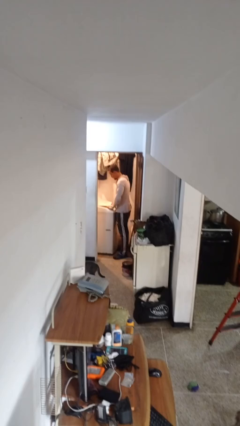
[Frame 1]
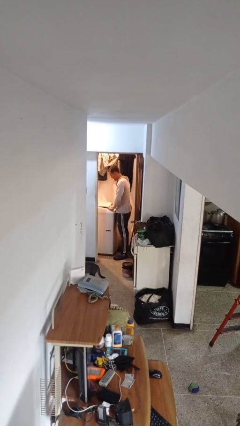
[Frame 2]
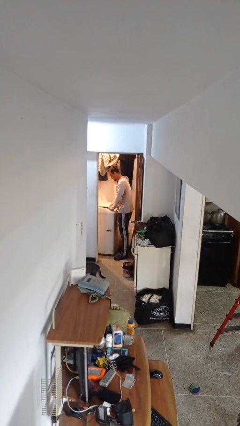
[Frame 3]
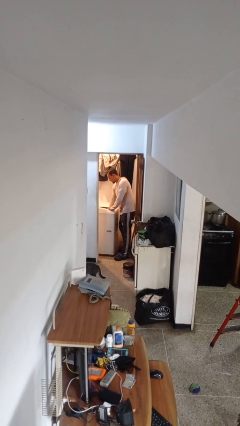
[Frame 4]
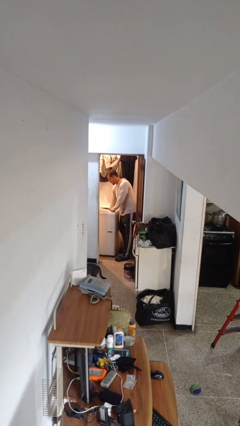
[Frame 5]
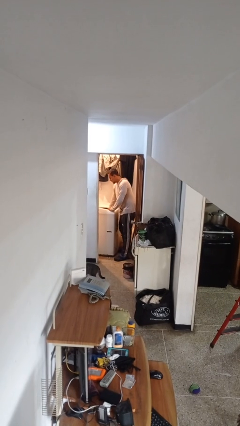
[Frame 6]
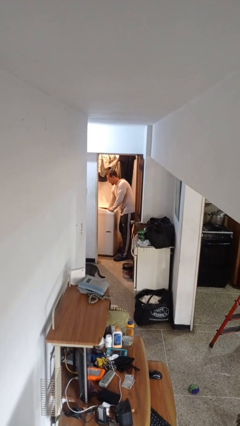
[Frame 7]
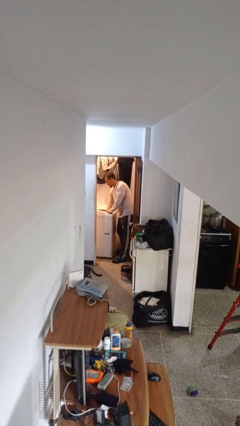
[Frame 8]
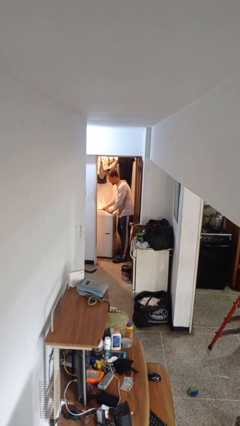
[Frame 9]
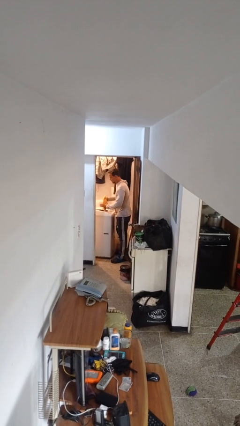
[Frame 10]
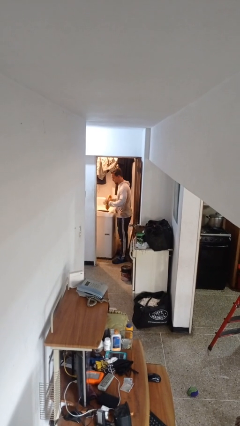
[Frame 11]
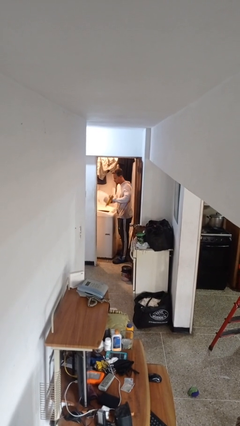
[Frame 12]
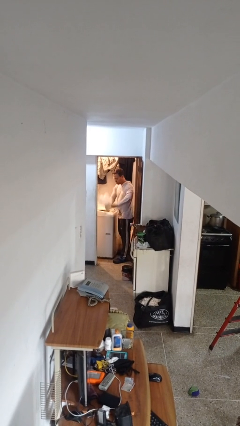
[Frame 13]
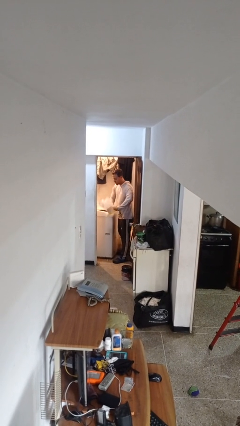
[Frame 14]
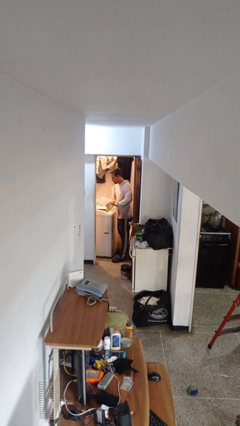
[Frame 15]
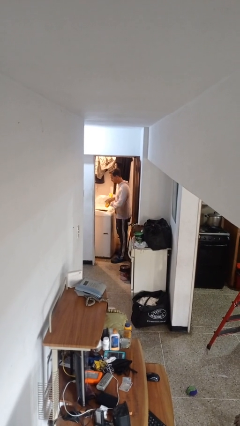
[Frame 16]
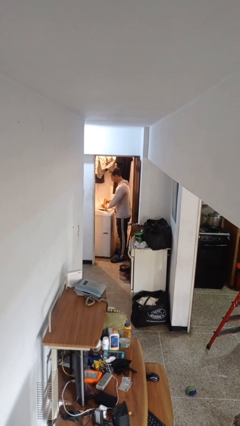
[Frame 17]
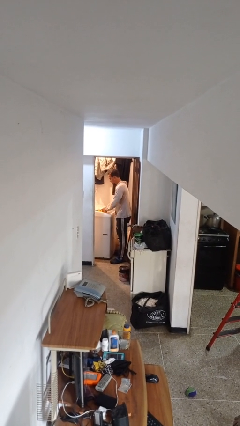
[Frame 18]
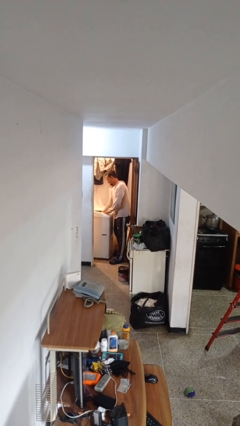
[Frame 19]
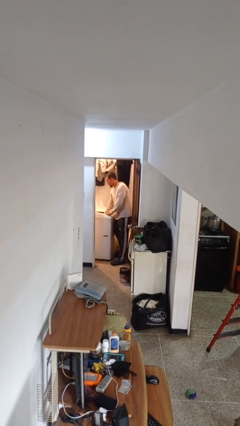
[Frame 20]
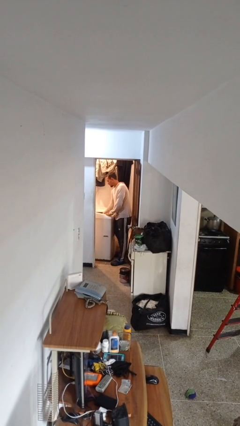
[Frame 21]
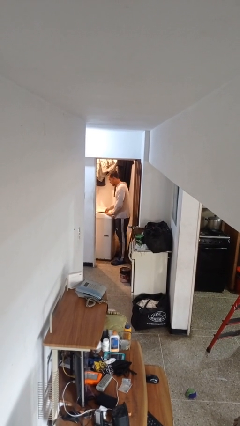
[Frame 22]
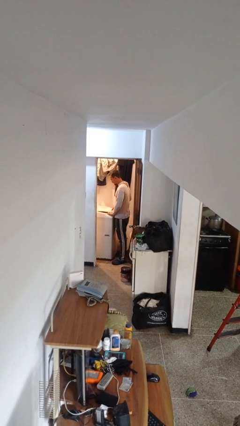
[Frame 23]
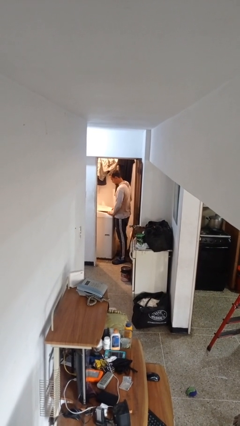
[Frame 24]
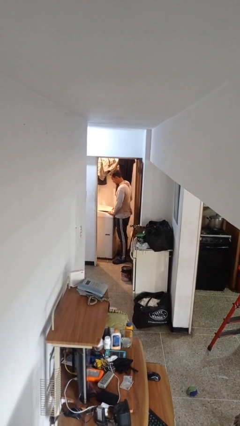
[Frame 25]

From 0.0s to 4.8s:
person cleans dryer lint trap

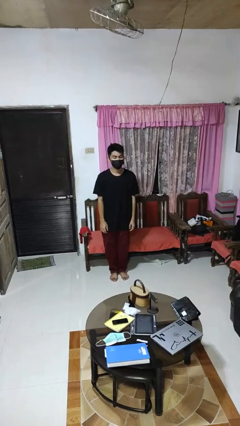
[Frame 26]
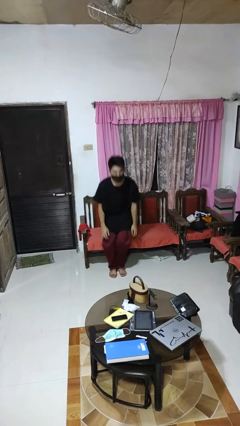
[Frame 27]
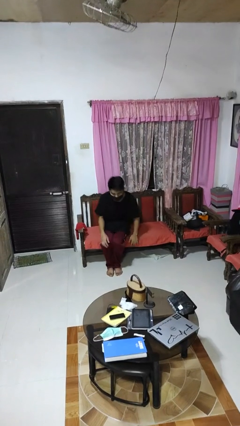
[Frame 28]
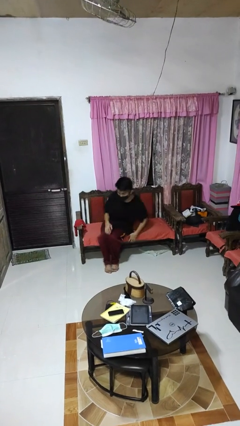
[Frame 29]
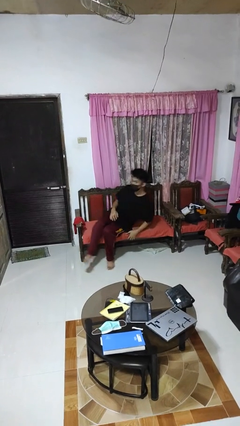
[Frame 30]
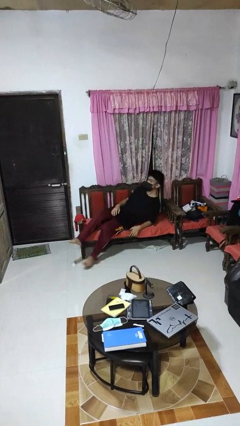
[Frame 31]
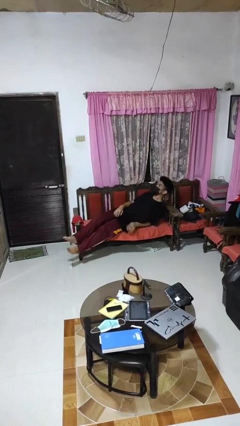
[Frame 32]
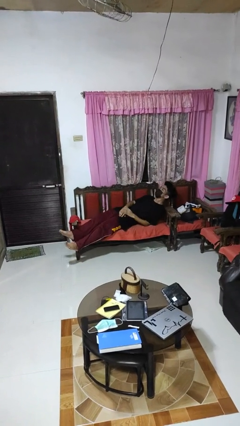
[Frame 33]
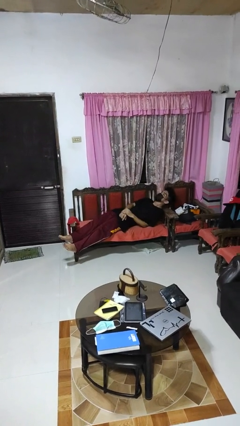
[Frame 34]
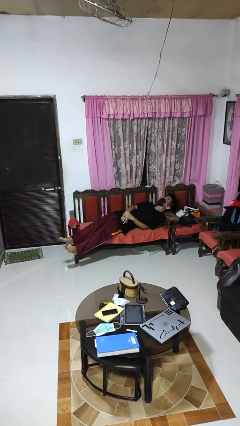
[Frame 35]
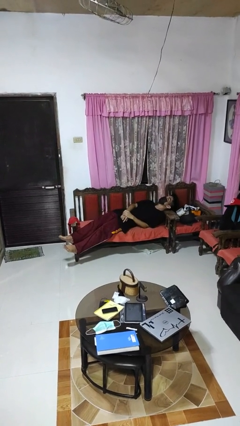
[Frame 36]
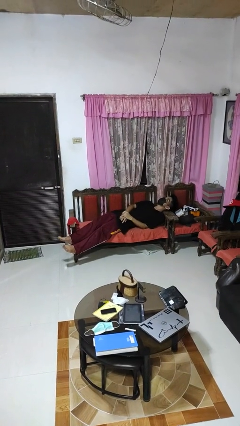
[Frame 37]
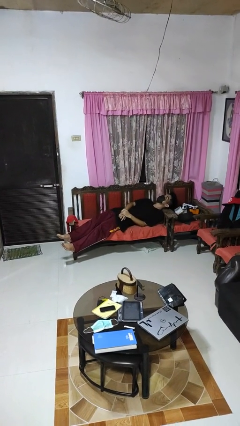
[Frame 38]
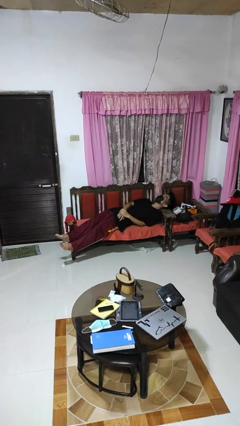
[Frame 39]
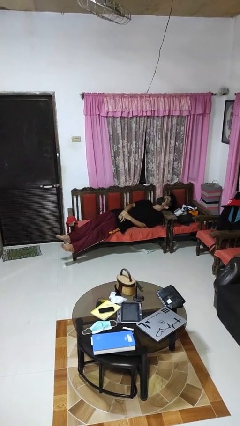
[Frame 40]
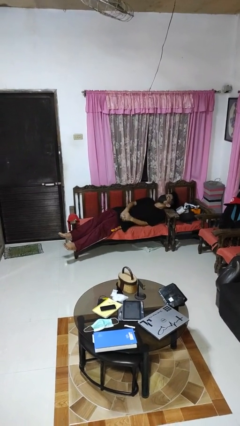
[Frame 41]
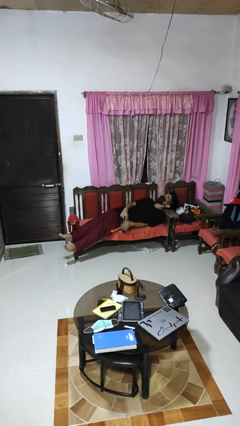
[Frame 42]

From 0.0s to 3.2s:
person lies down on couch

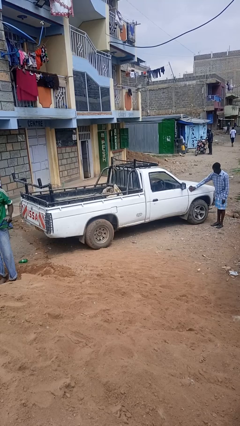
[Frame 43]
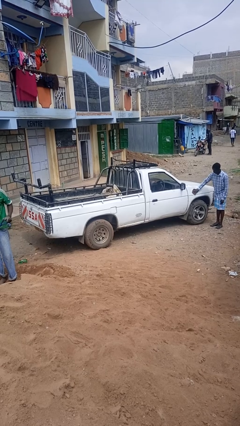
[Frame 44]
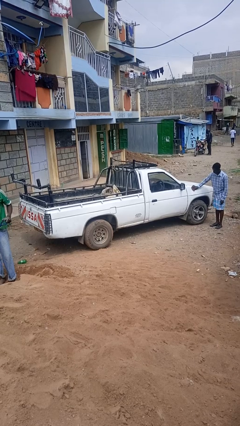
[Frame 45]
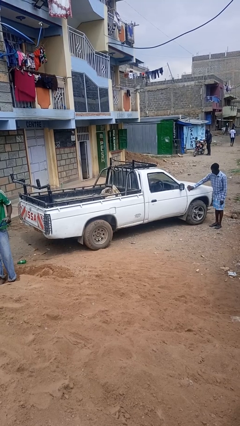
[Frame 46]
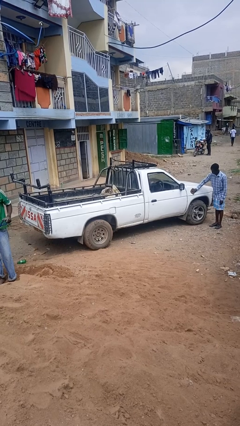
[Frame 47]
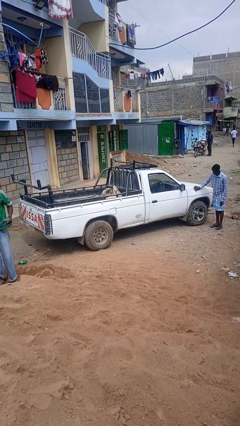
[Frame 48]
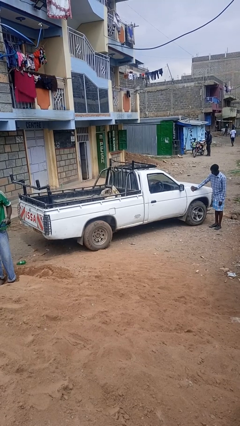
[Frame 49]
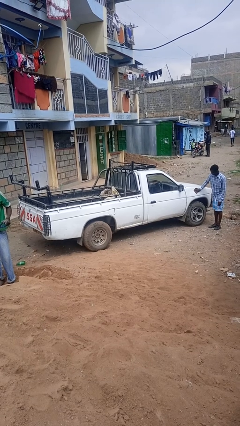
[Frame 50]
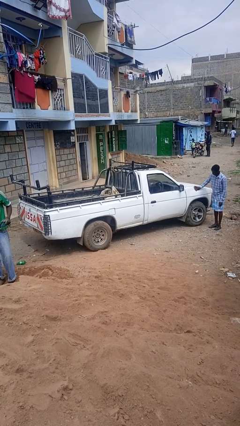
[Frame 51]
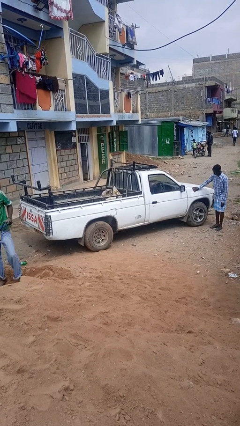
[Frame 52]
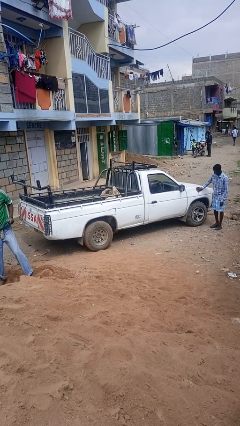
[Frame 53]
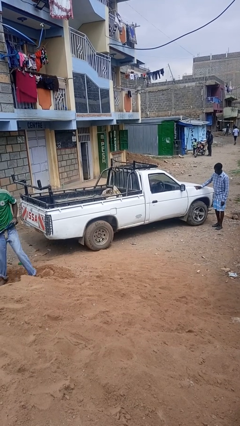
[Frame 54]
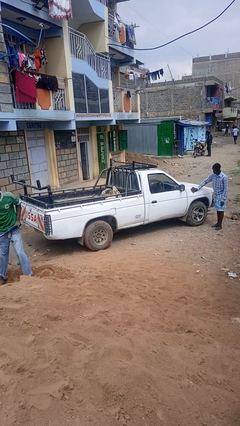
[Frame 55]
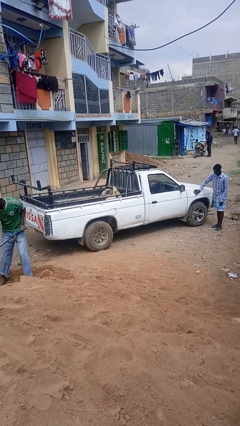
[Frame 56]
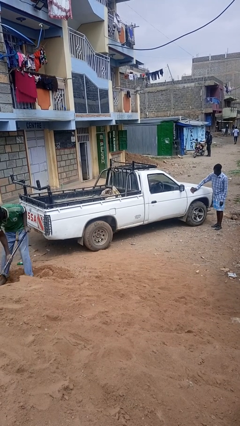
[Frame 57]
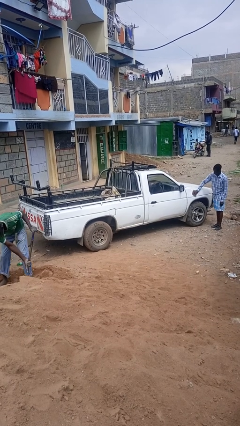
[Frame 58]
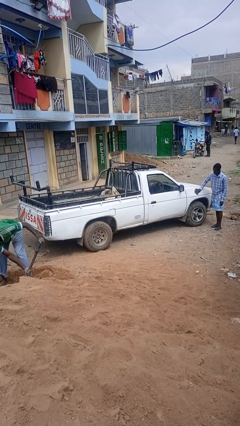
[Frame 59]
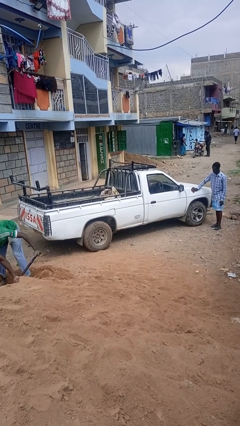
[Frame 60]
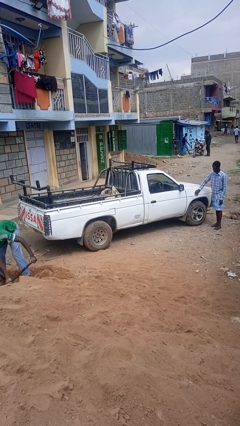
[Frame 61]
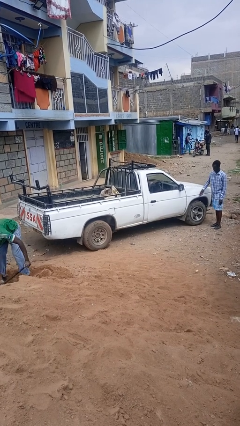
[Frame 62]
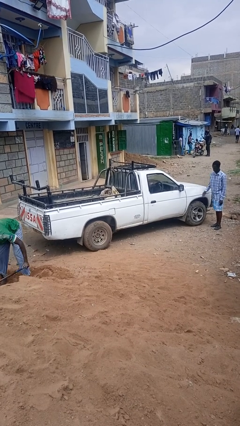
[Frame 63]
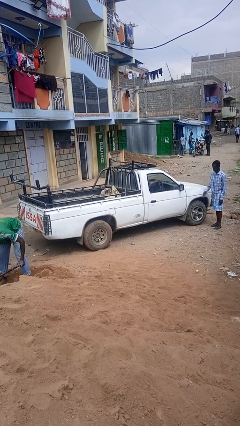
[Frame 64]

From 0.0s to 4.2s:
person polishes car with rag

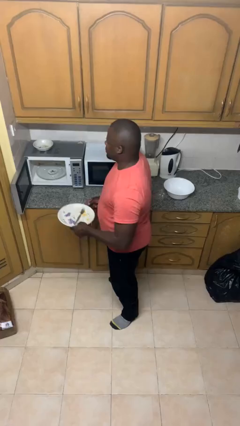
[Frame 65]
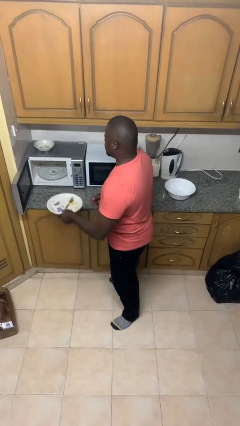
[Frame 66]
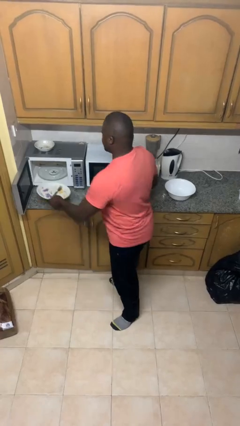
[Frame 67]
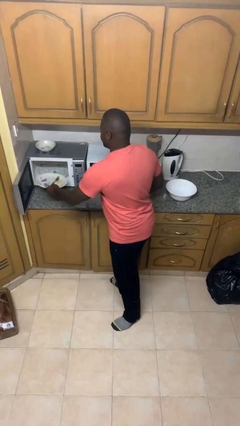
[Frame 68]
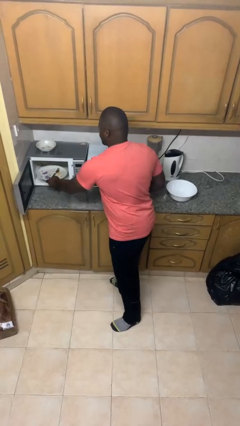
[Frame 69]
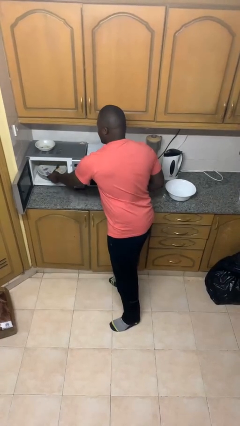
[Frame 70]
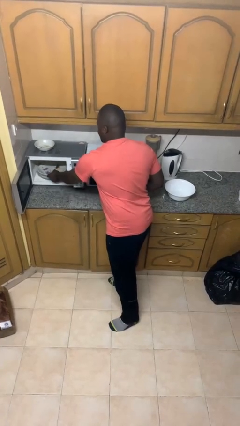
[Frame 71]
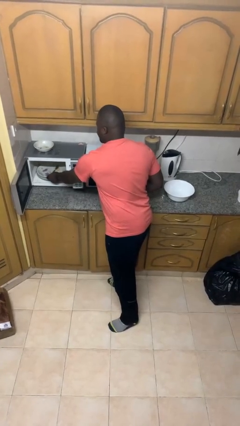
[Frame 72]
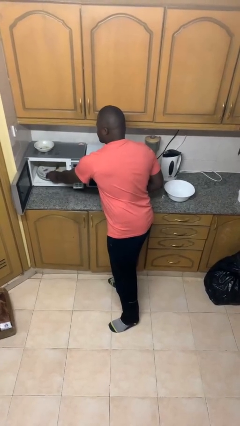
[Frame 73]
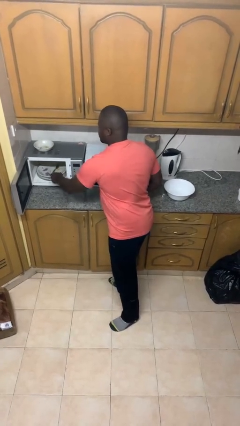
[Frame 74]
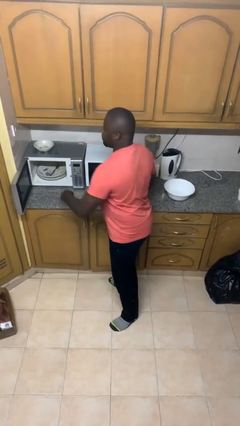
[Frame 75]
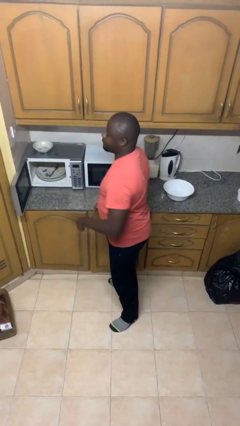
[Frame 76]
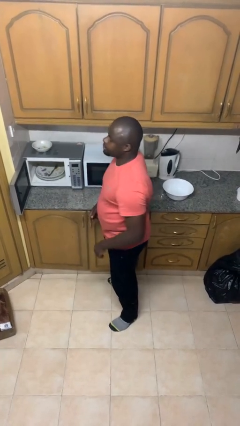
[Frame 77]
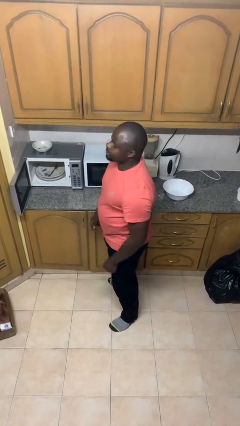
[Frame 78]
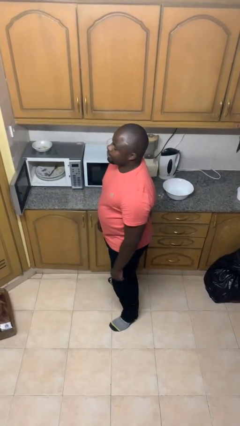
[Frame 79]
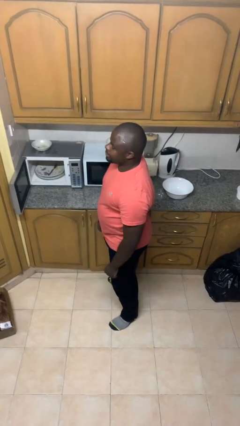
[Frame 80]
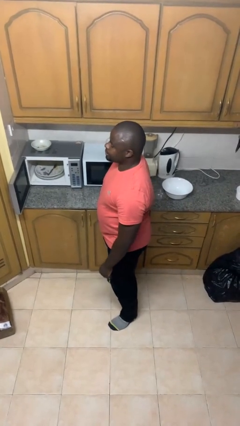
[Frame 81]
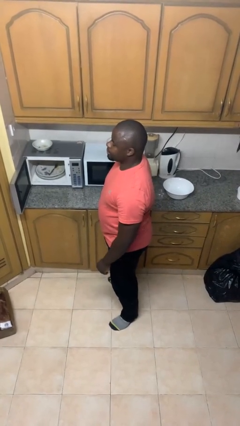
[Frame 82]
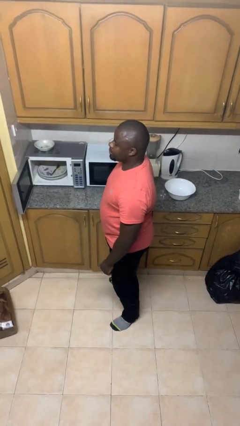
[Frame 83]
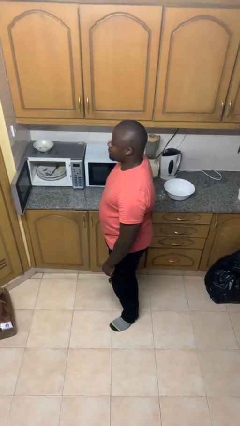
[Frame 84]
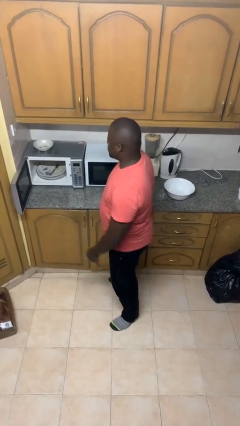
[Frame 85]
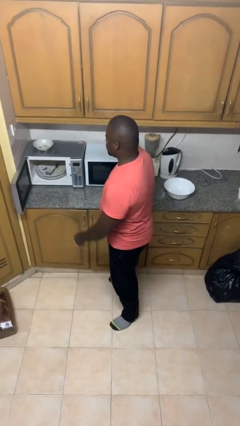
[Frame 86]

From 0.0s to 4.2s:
person puts object into microwave

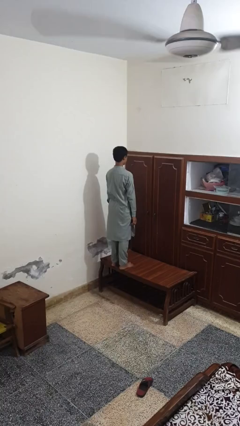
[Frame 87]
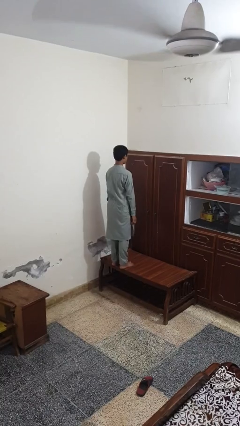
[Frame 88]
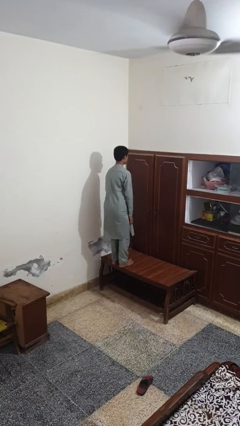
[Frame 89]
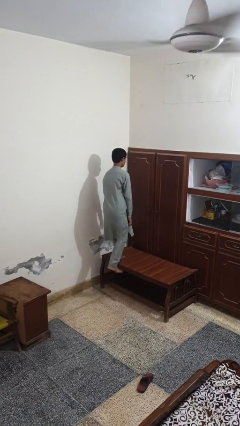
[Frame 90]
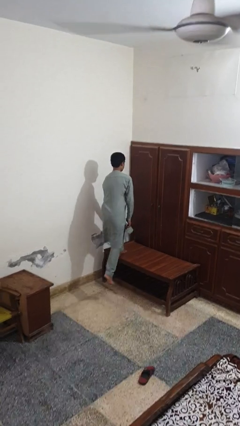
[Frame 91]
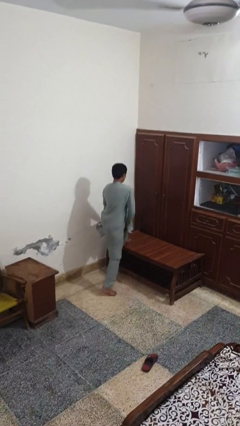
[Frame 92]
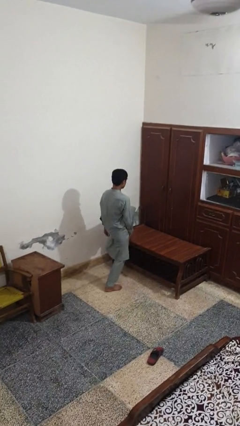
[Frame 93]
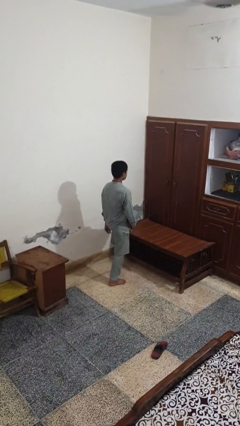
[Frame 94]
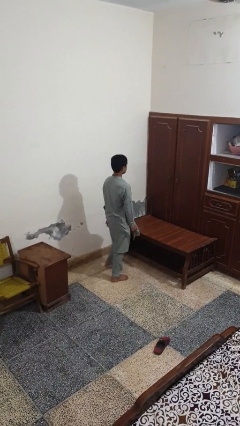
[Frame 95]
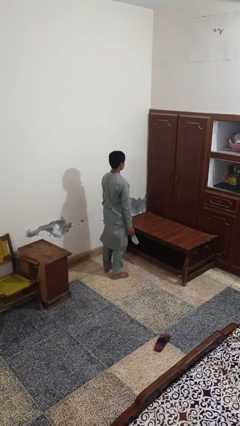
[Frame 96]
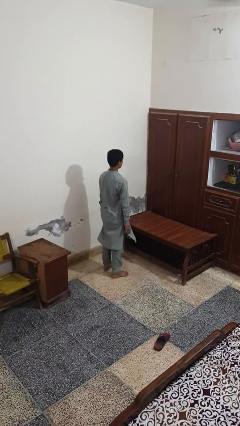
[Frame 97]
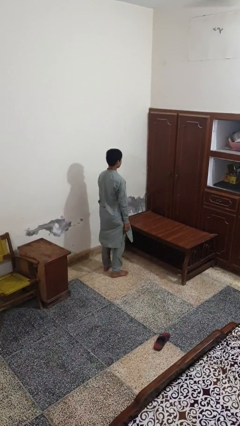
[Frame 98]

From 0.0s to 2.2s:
person climbs off table
